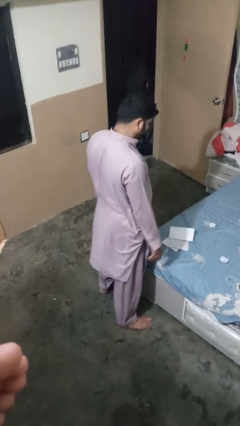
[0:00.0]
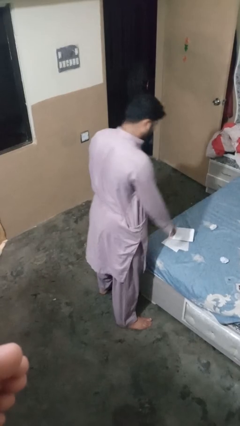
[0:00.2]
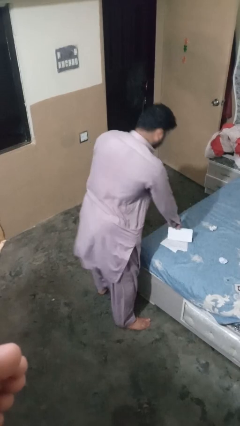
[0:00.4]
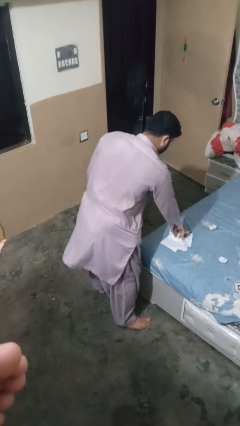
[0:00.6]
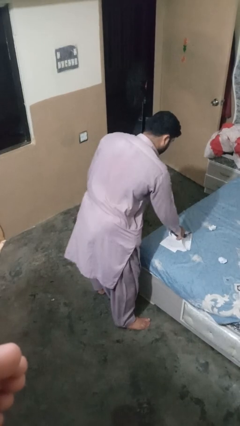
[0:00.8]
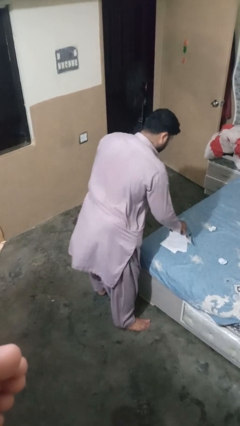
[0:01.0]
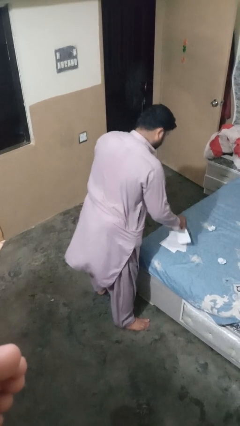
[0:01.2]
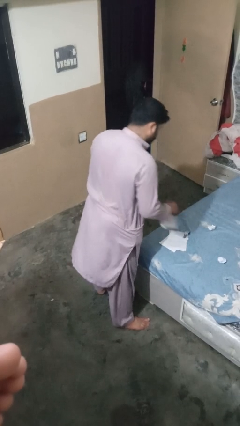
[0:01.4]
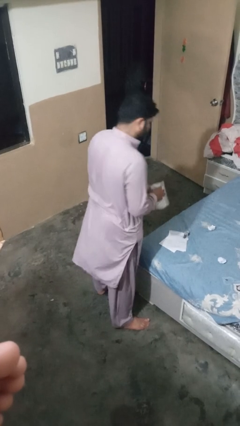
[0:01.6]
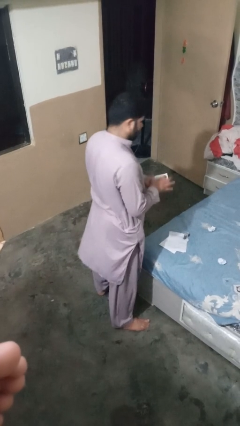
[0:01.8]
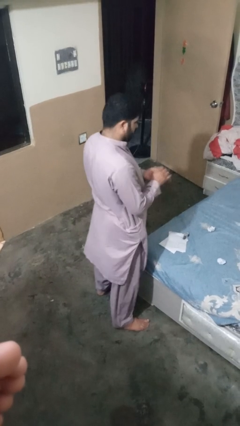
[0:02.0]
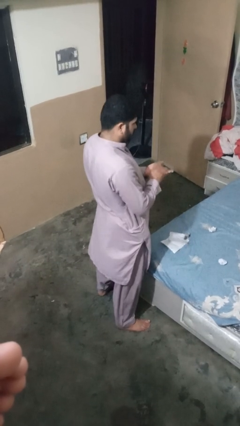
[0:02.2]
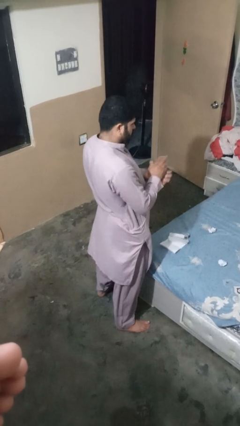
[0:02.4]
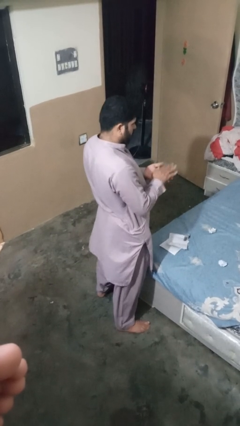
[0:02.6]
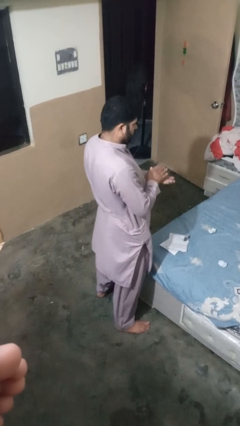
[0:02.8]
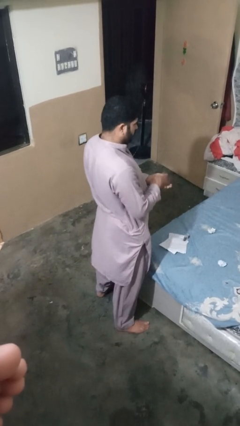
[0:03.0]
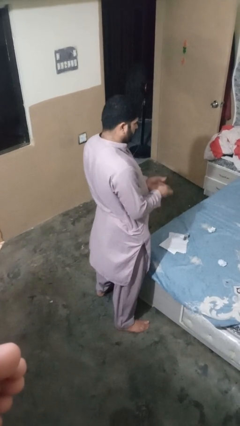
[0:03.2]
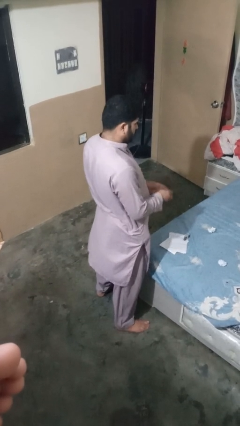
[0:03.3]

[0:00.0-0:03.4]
person crumples paper

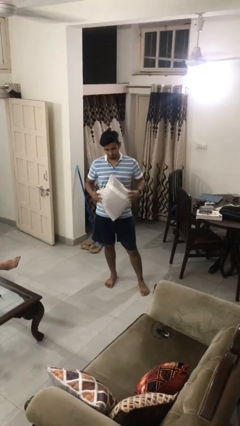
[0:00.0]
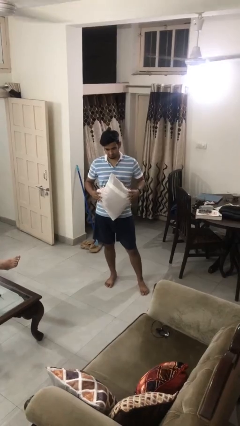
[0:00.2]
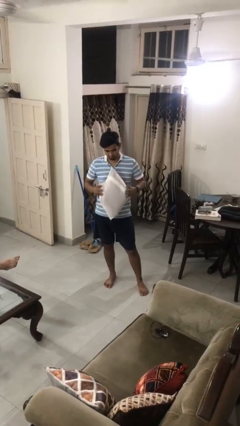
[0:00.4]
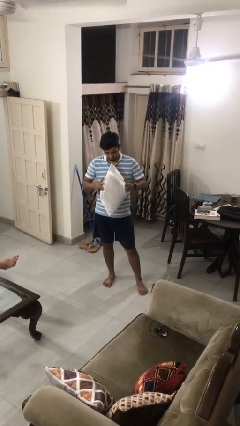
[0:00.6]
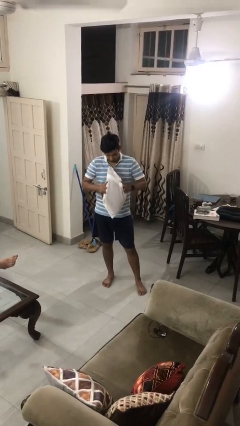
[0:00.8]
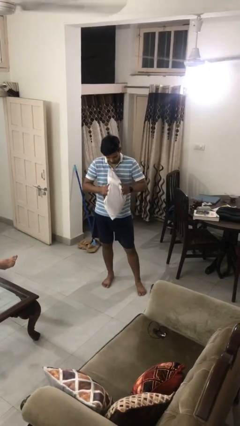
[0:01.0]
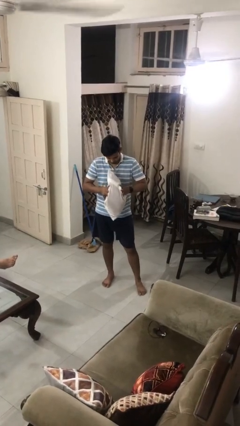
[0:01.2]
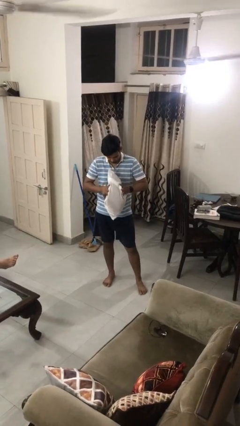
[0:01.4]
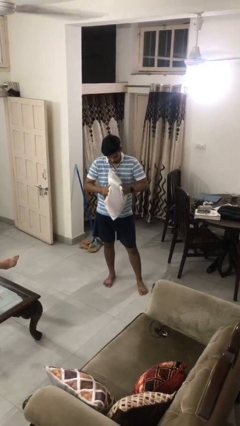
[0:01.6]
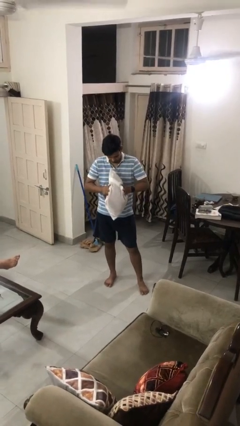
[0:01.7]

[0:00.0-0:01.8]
person squeezes object

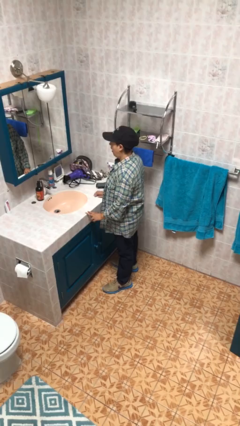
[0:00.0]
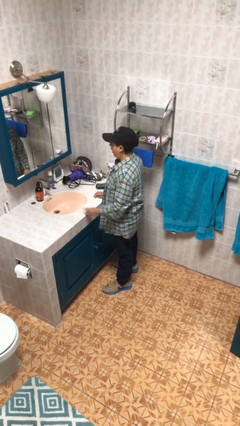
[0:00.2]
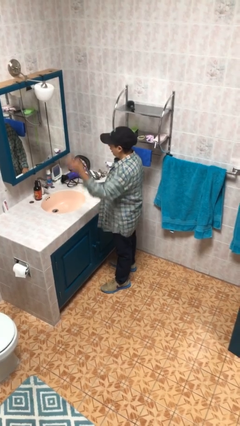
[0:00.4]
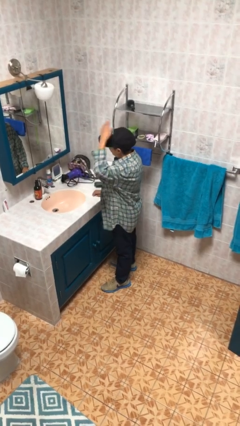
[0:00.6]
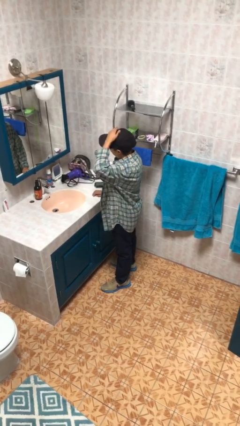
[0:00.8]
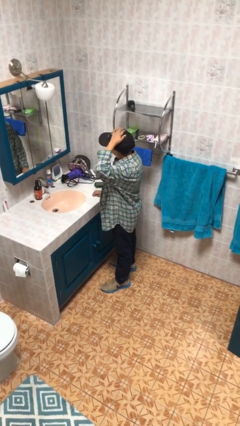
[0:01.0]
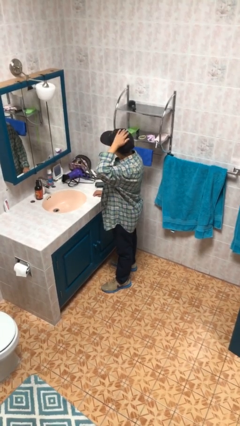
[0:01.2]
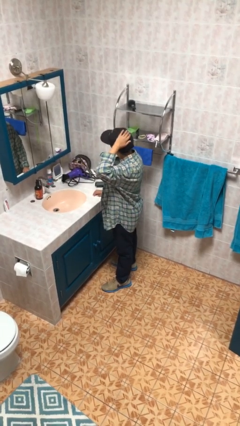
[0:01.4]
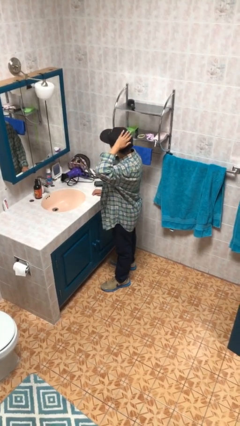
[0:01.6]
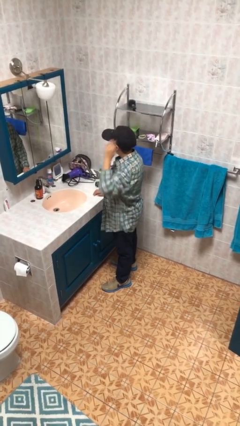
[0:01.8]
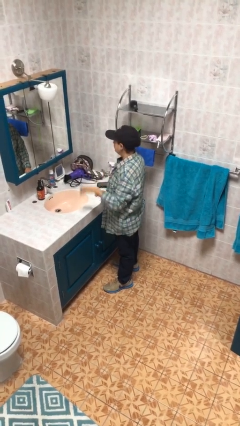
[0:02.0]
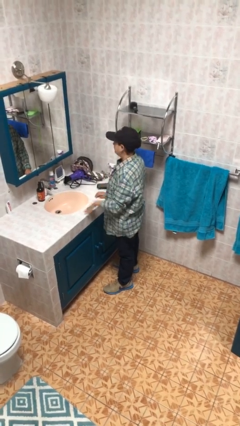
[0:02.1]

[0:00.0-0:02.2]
person pats head

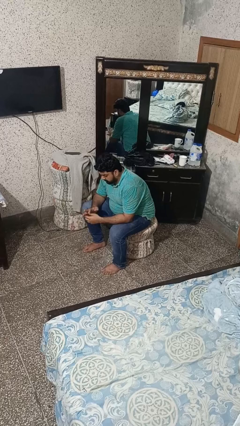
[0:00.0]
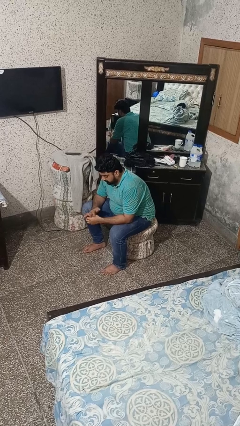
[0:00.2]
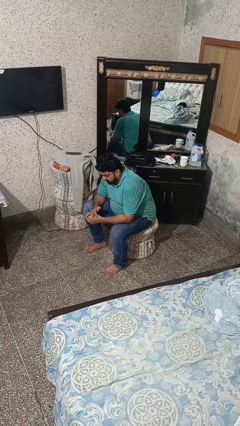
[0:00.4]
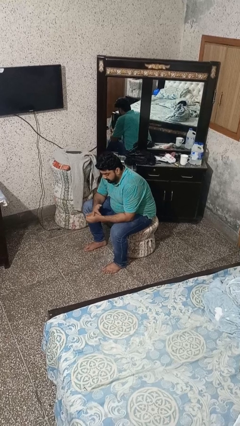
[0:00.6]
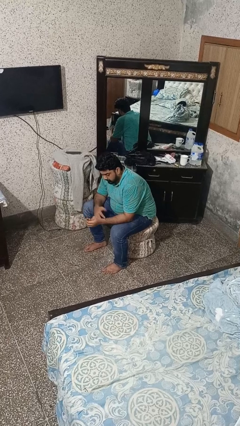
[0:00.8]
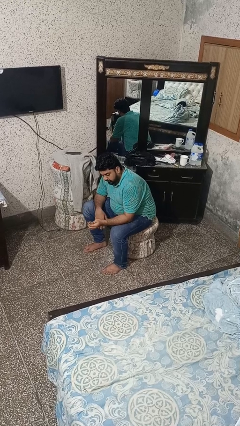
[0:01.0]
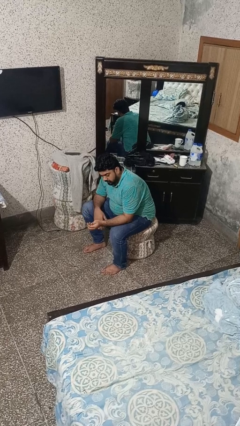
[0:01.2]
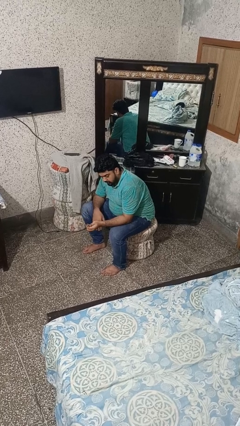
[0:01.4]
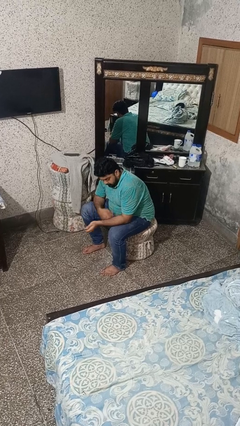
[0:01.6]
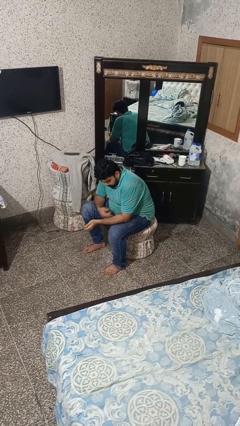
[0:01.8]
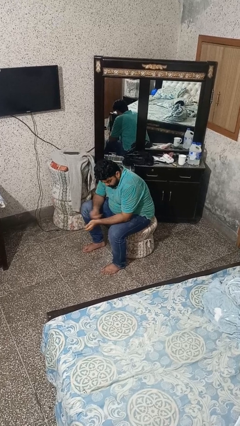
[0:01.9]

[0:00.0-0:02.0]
person takes off ring

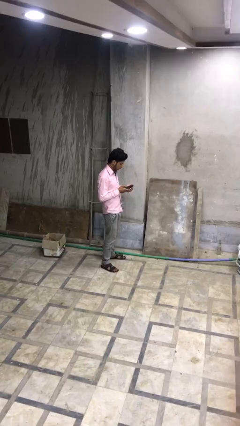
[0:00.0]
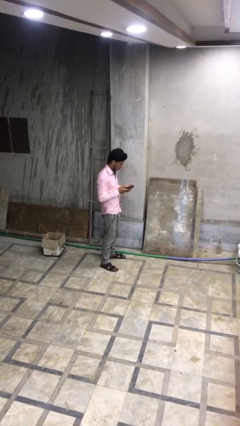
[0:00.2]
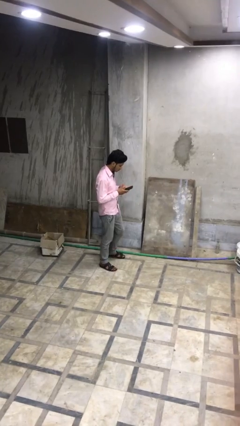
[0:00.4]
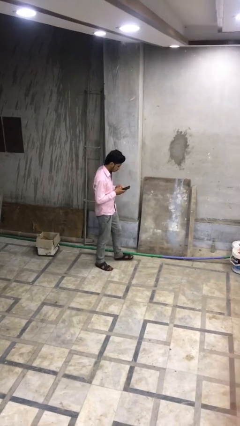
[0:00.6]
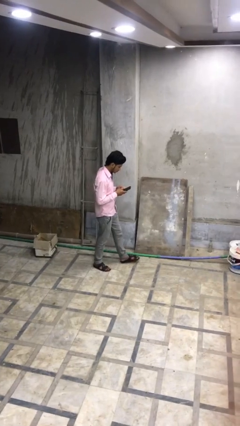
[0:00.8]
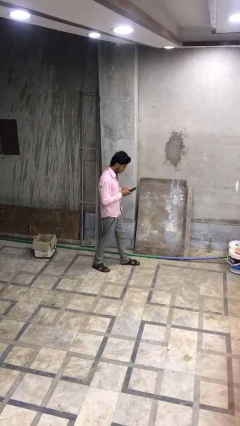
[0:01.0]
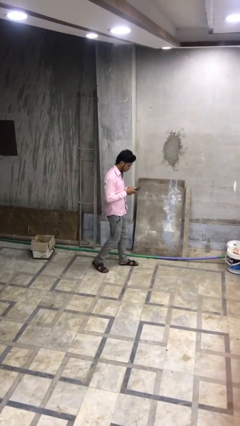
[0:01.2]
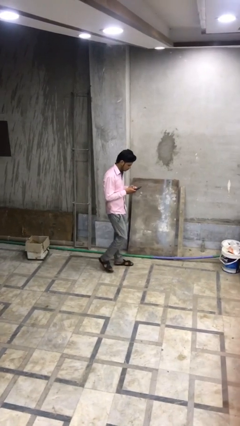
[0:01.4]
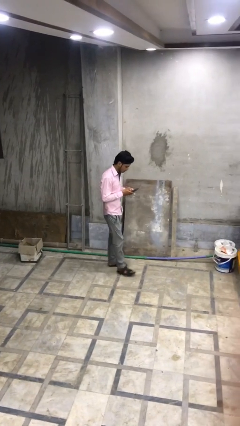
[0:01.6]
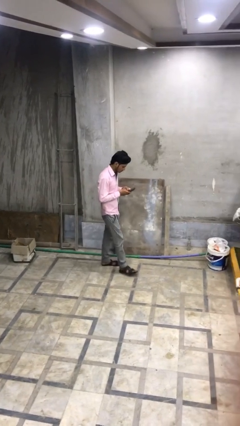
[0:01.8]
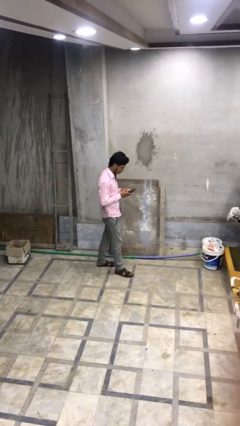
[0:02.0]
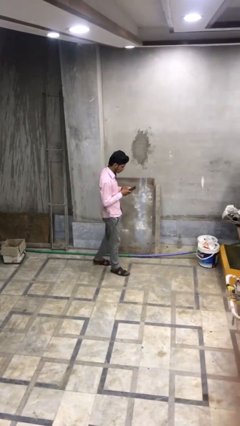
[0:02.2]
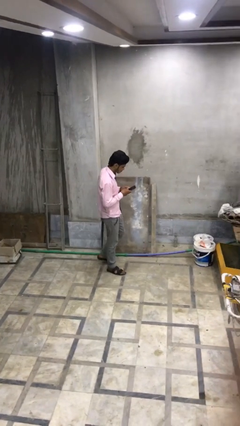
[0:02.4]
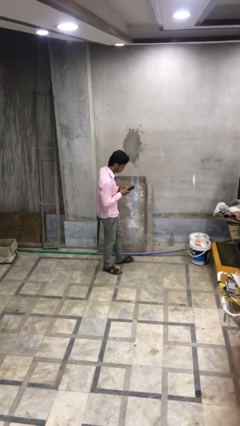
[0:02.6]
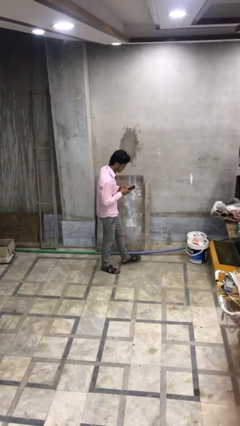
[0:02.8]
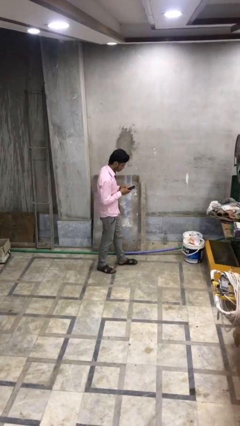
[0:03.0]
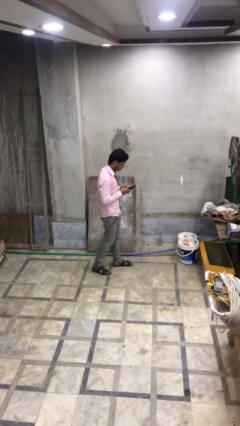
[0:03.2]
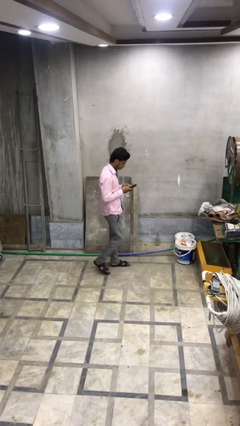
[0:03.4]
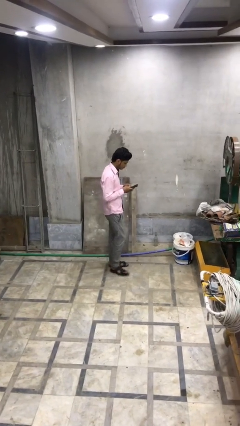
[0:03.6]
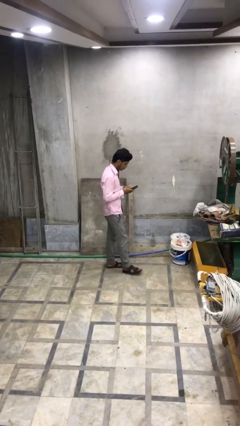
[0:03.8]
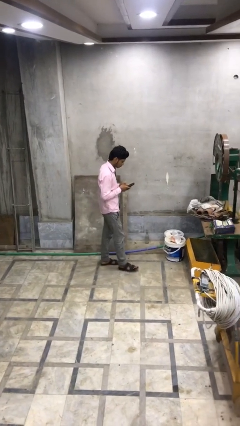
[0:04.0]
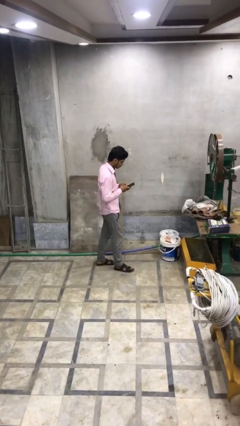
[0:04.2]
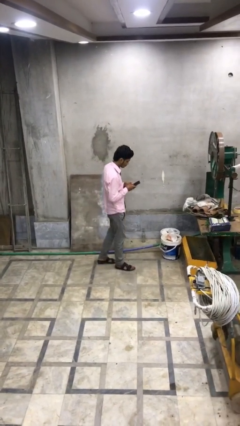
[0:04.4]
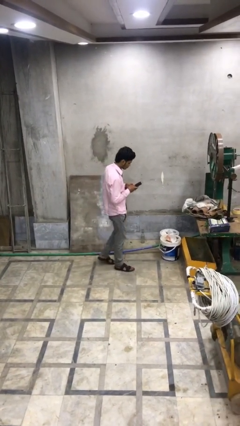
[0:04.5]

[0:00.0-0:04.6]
person texts on phone

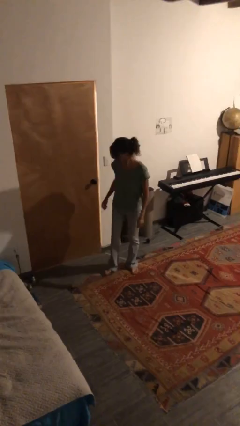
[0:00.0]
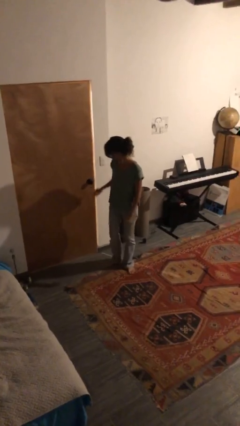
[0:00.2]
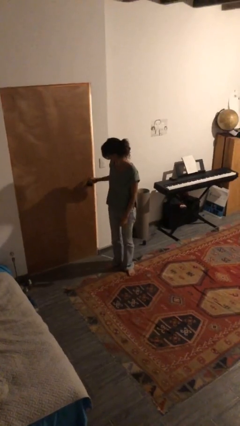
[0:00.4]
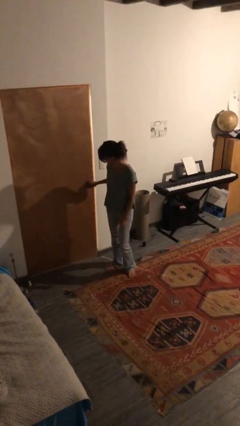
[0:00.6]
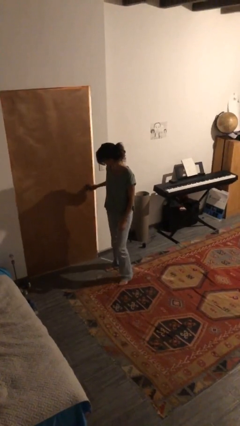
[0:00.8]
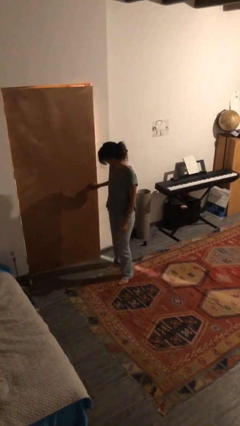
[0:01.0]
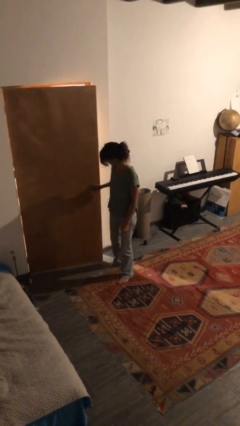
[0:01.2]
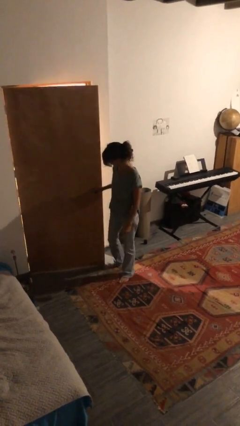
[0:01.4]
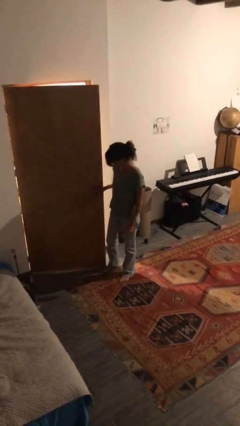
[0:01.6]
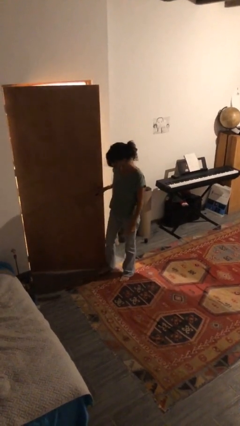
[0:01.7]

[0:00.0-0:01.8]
person opens facility door

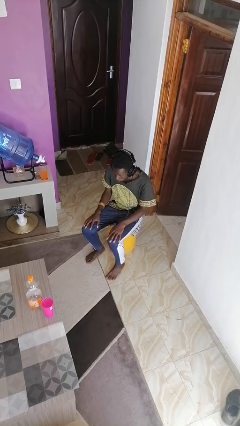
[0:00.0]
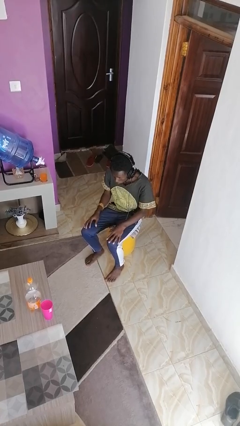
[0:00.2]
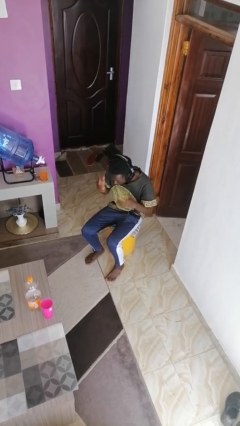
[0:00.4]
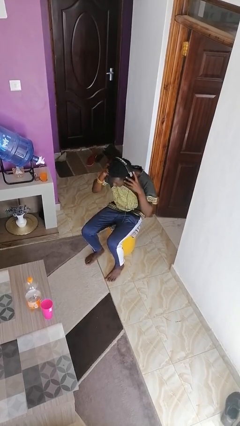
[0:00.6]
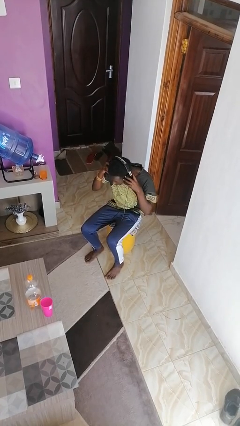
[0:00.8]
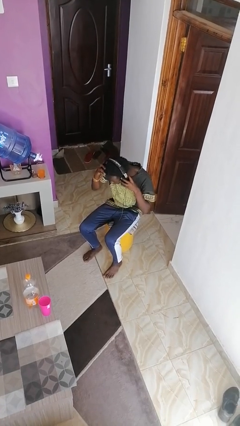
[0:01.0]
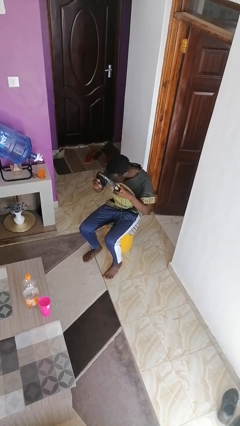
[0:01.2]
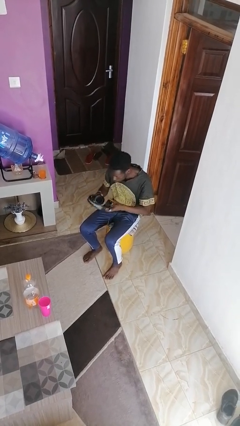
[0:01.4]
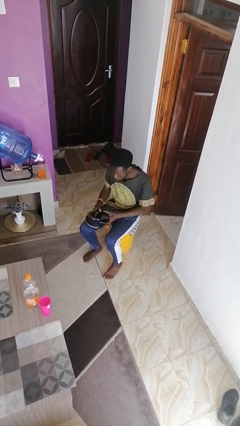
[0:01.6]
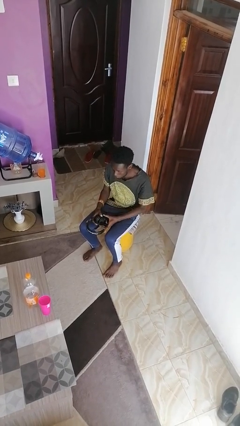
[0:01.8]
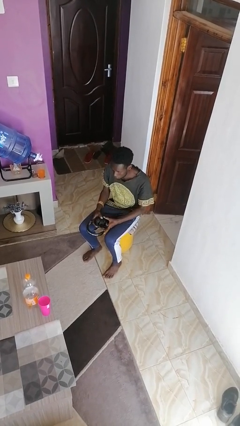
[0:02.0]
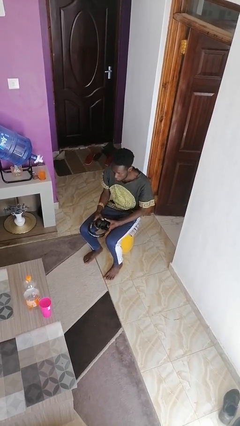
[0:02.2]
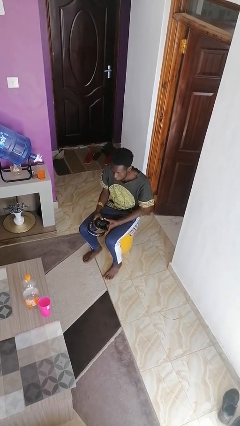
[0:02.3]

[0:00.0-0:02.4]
person takes off headphones
